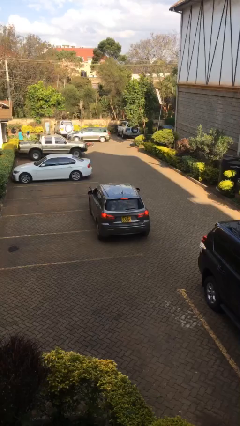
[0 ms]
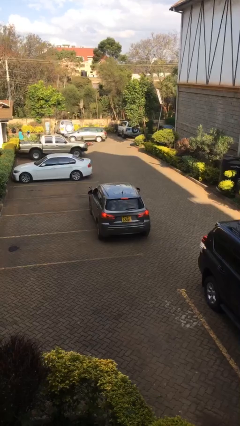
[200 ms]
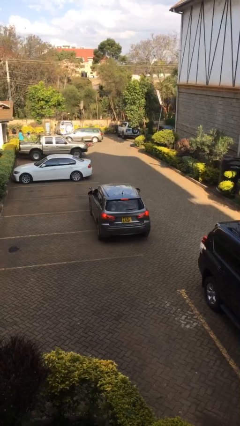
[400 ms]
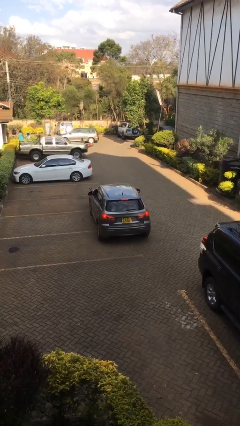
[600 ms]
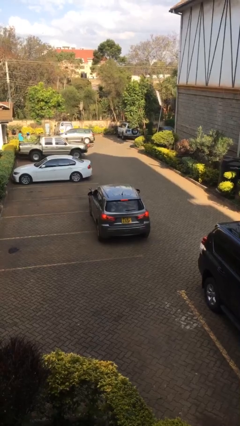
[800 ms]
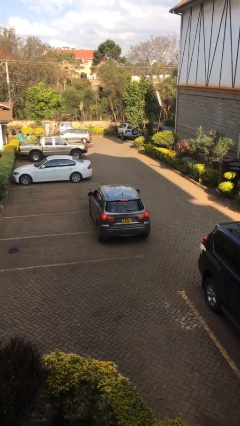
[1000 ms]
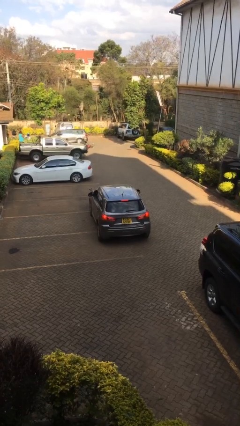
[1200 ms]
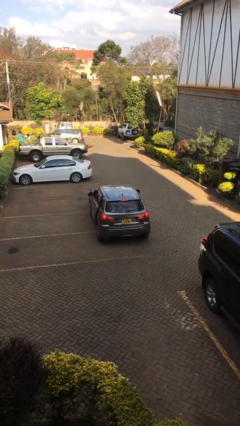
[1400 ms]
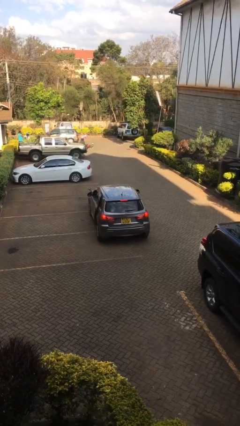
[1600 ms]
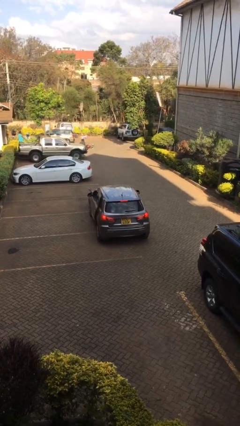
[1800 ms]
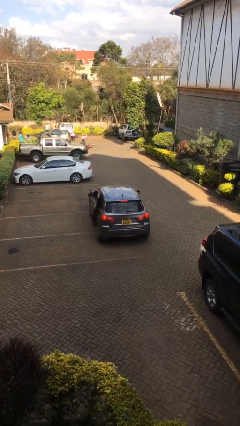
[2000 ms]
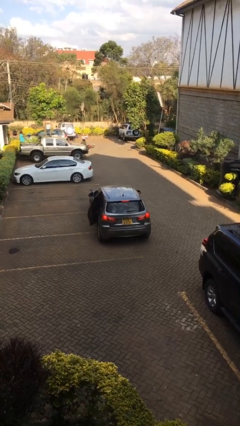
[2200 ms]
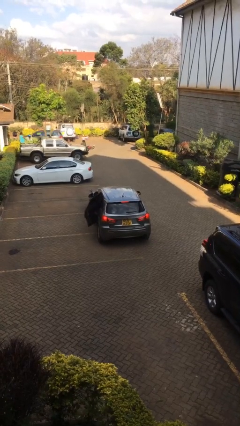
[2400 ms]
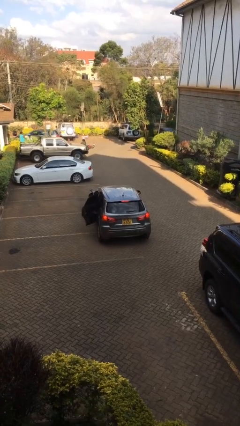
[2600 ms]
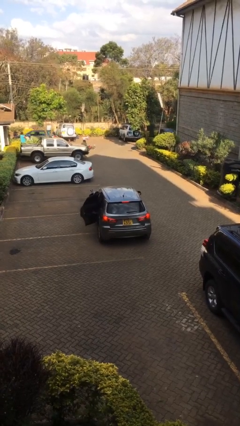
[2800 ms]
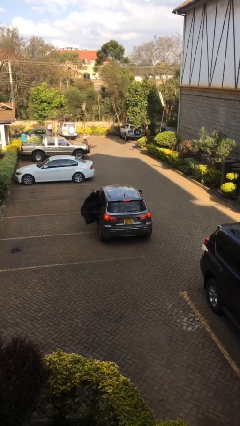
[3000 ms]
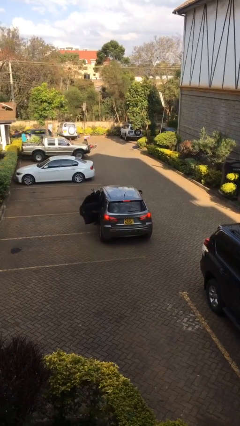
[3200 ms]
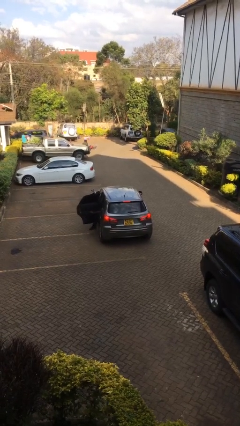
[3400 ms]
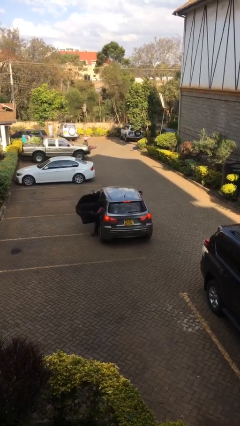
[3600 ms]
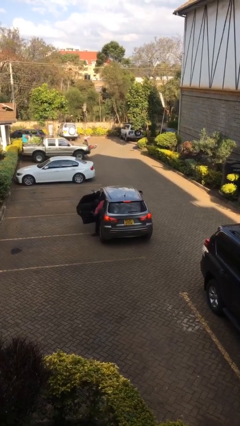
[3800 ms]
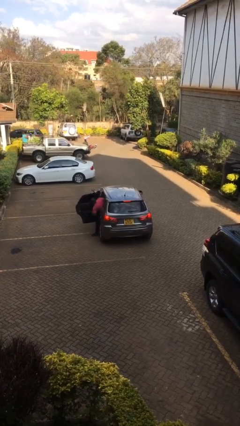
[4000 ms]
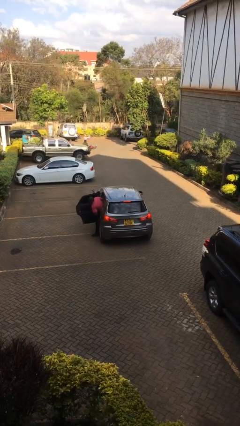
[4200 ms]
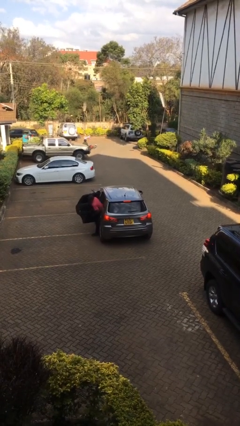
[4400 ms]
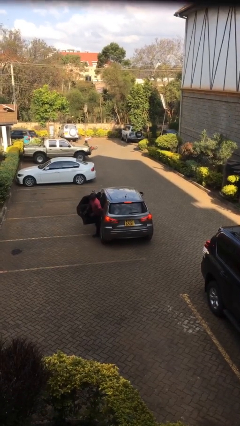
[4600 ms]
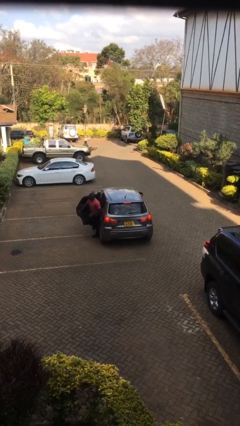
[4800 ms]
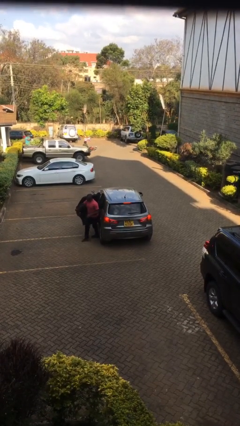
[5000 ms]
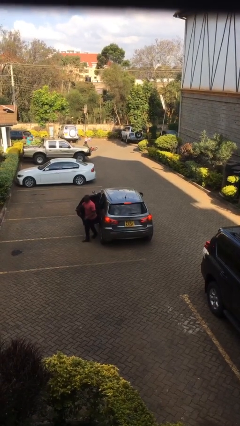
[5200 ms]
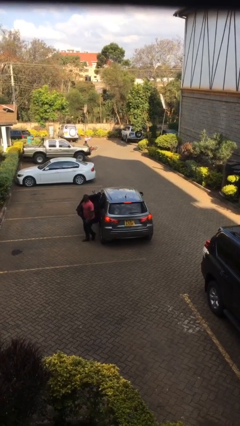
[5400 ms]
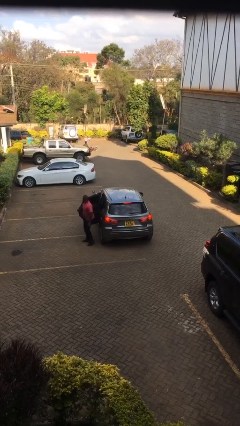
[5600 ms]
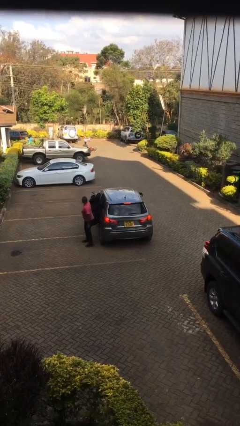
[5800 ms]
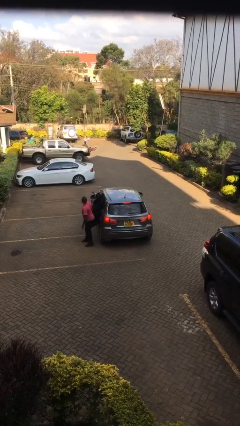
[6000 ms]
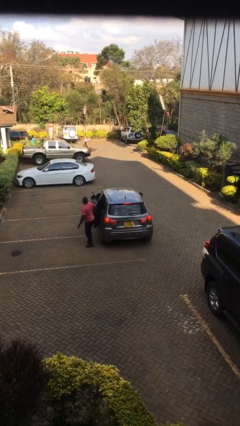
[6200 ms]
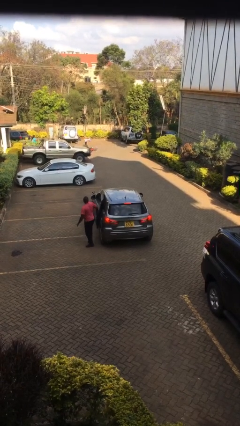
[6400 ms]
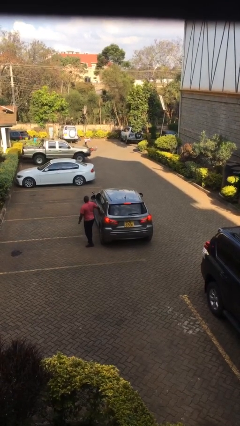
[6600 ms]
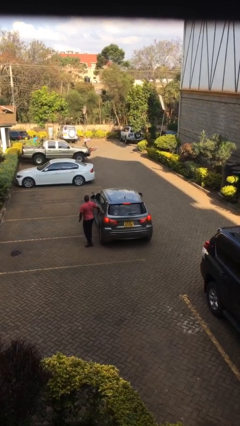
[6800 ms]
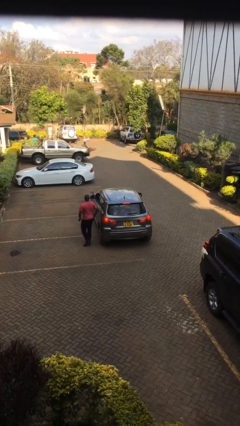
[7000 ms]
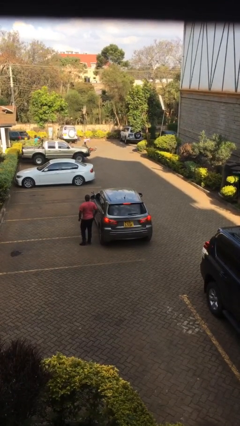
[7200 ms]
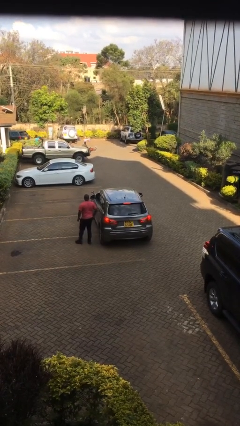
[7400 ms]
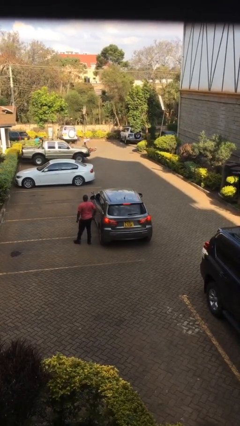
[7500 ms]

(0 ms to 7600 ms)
car drops off person

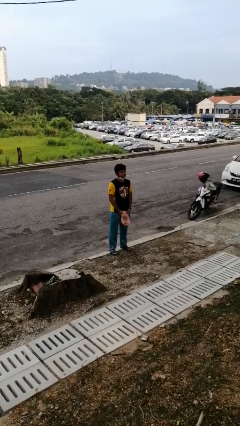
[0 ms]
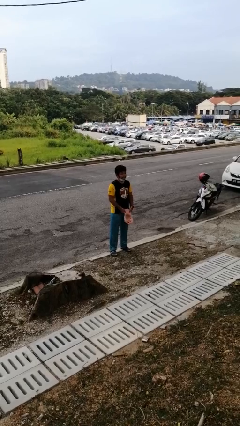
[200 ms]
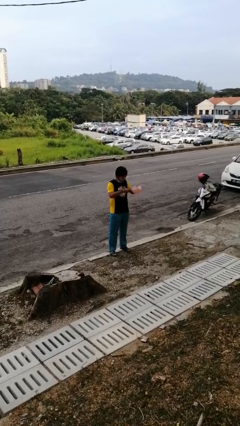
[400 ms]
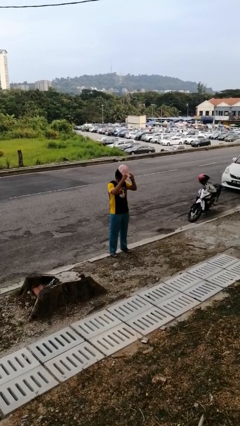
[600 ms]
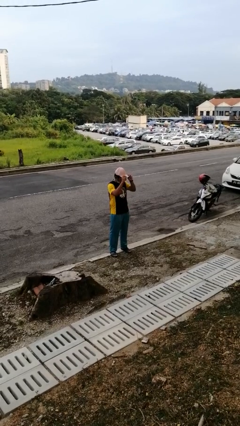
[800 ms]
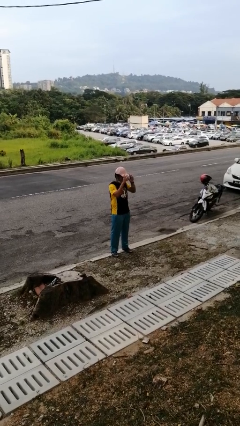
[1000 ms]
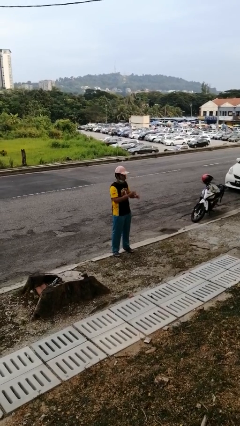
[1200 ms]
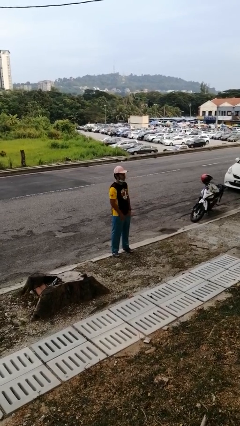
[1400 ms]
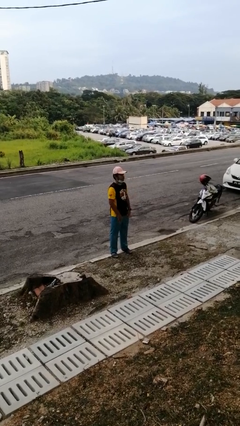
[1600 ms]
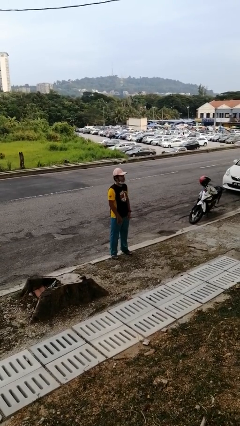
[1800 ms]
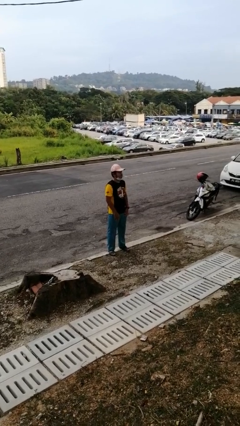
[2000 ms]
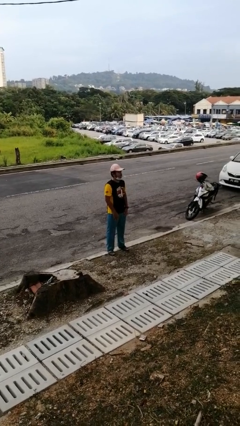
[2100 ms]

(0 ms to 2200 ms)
person puts on hat

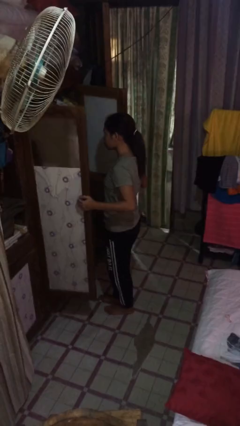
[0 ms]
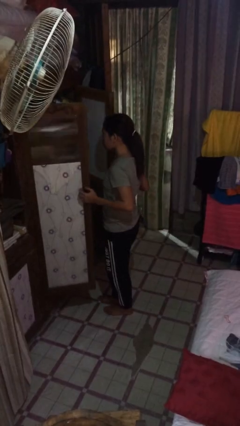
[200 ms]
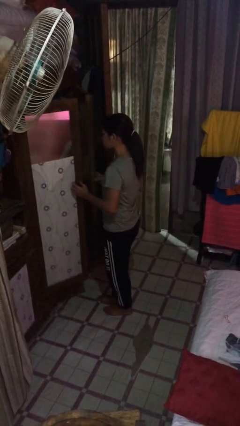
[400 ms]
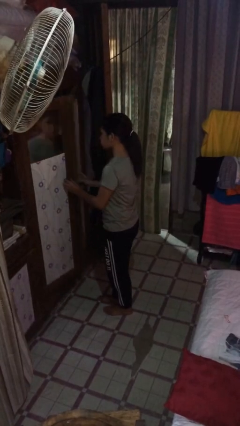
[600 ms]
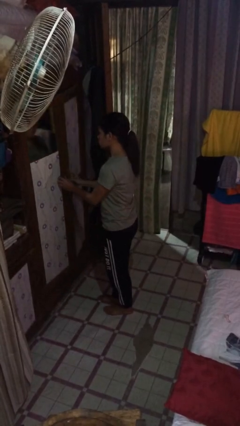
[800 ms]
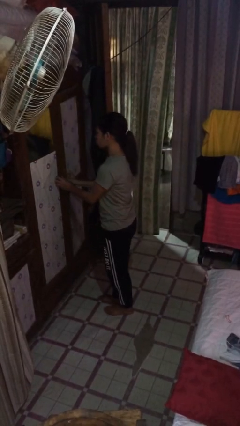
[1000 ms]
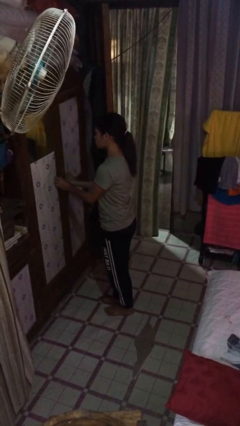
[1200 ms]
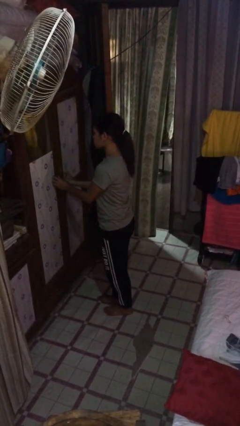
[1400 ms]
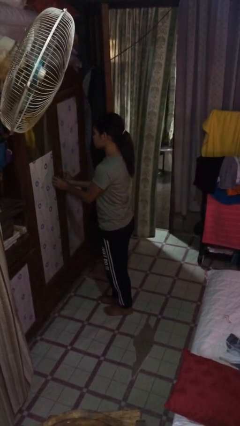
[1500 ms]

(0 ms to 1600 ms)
person closes closet door

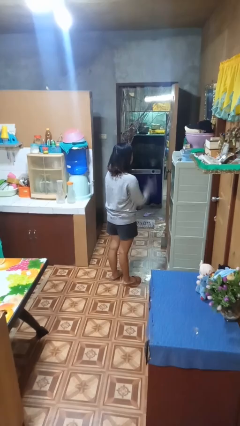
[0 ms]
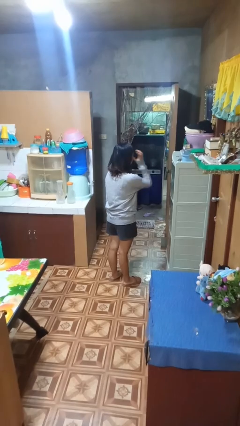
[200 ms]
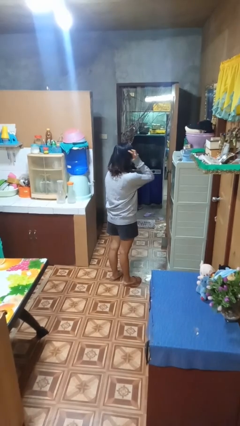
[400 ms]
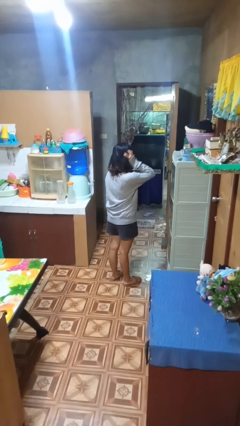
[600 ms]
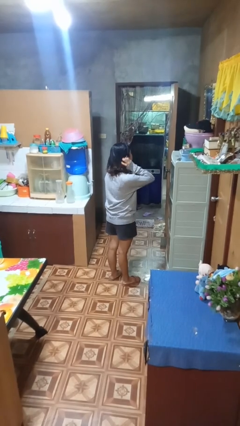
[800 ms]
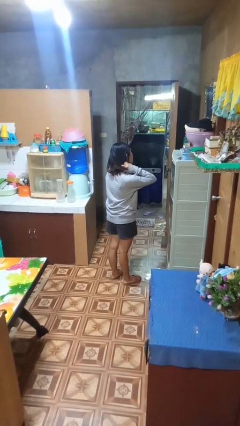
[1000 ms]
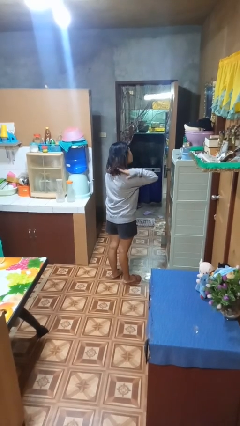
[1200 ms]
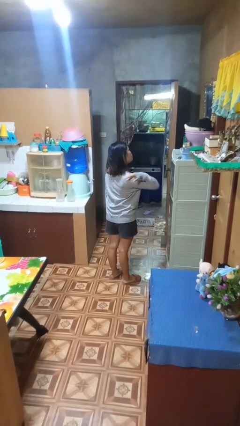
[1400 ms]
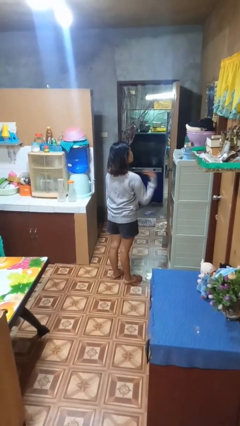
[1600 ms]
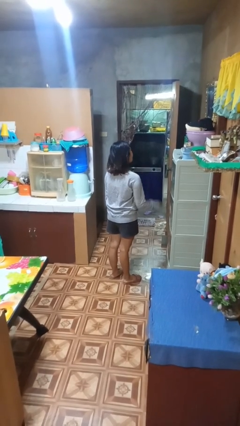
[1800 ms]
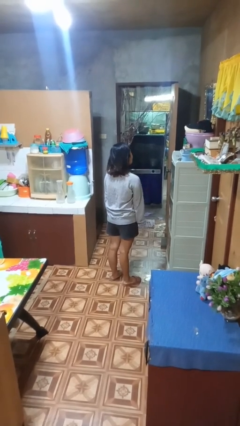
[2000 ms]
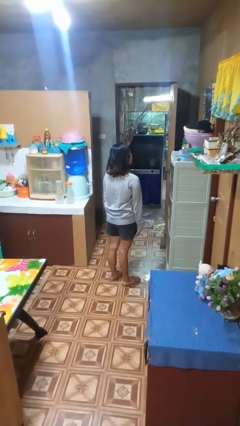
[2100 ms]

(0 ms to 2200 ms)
person strokes hair

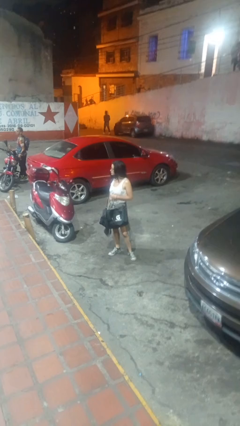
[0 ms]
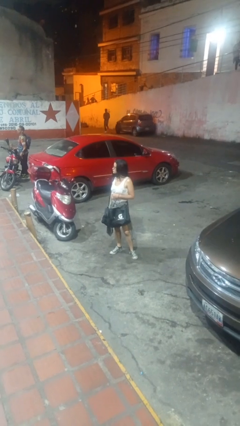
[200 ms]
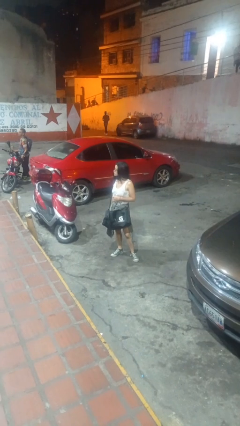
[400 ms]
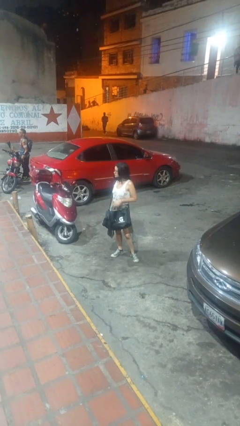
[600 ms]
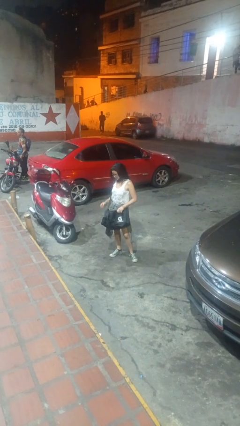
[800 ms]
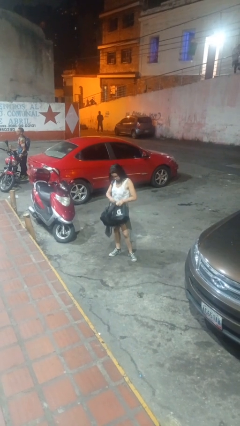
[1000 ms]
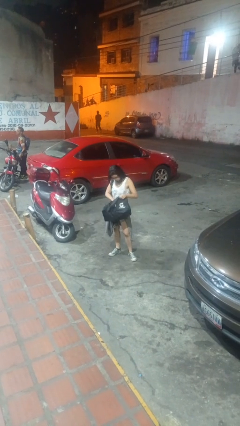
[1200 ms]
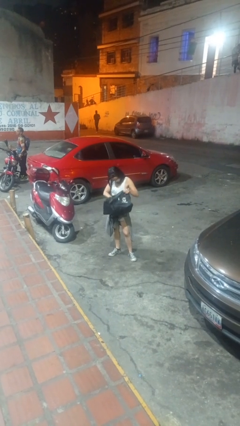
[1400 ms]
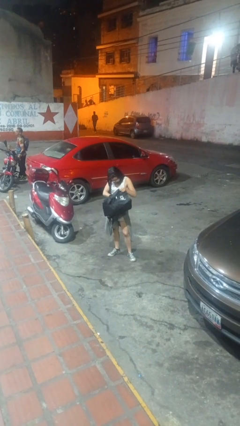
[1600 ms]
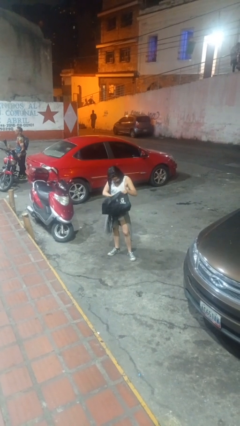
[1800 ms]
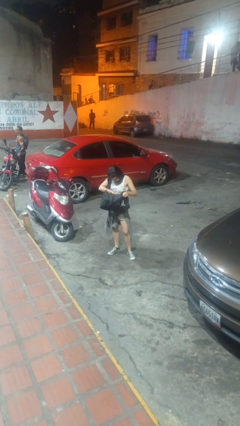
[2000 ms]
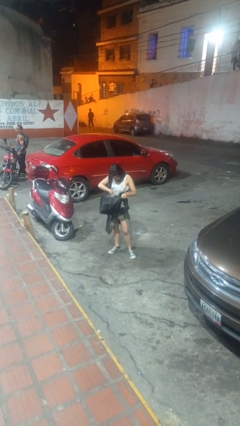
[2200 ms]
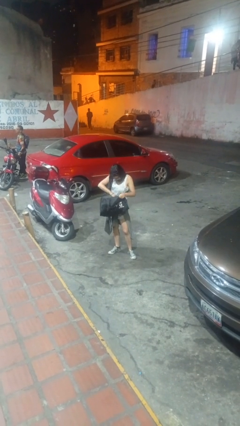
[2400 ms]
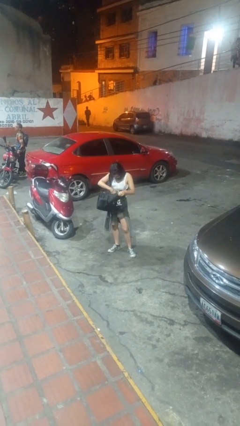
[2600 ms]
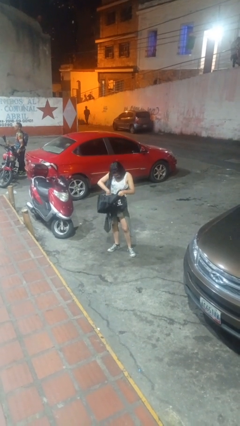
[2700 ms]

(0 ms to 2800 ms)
person searches in purse

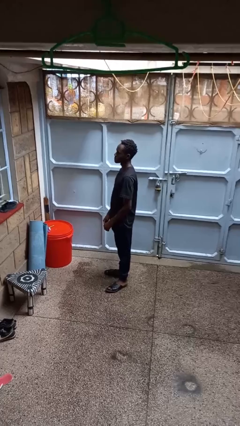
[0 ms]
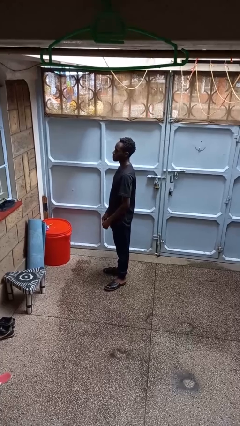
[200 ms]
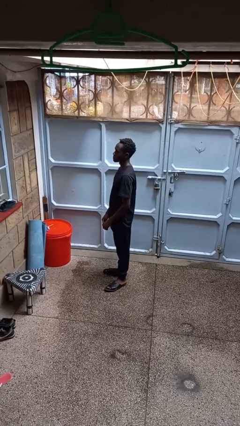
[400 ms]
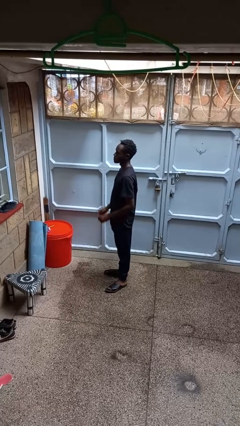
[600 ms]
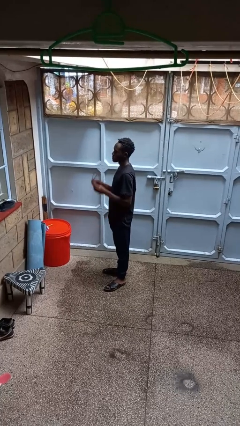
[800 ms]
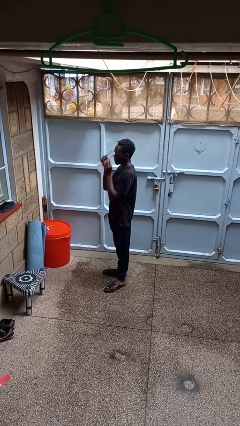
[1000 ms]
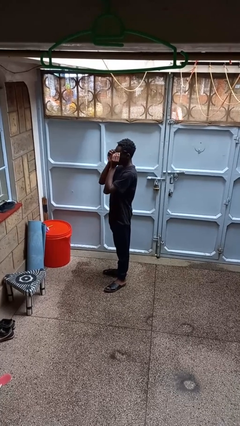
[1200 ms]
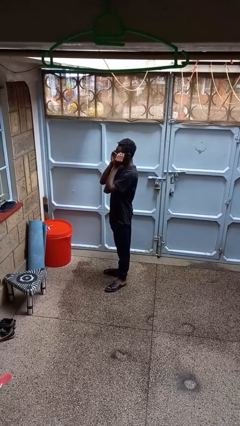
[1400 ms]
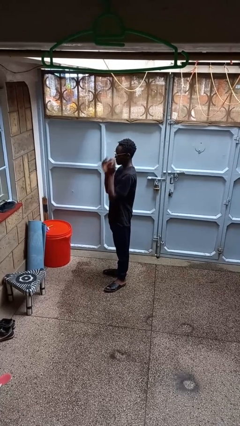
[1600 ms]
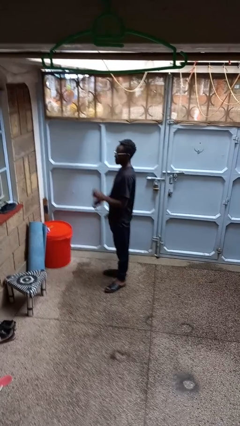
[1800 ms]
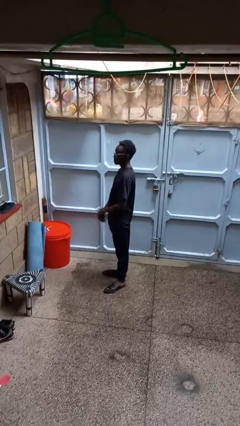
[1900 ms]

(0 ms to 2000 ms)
person puts on glasses
